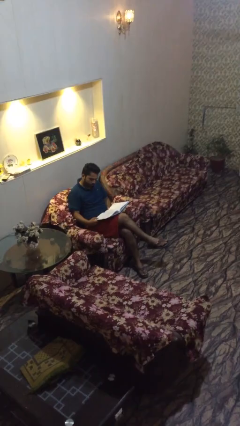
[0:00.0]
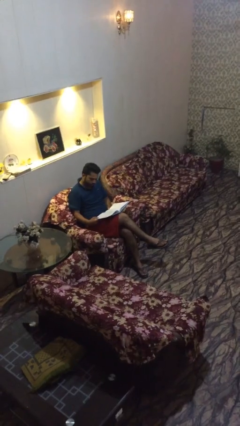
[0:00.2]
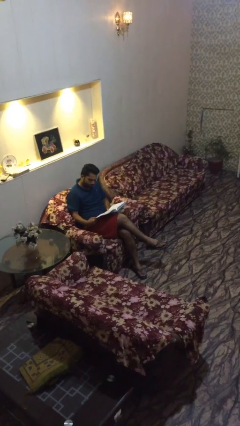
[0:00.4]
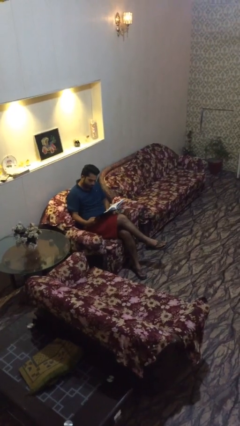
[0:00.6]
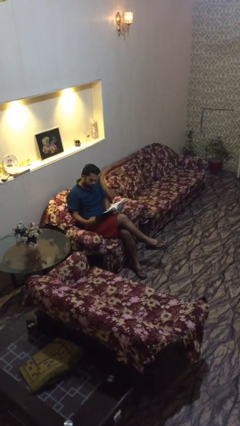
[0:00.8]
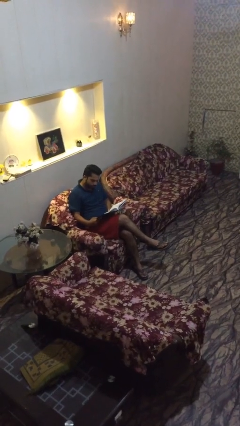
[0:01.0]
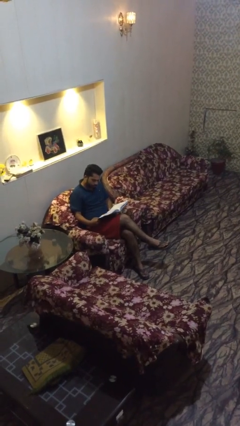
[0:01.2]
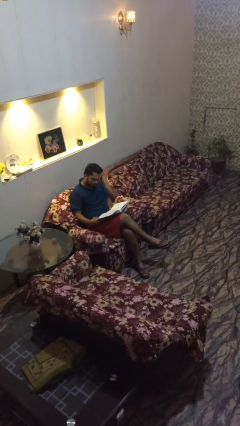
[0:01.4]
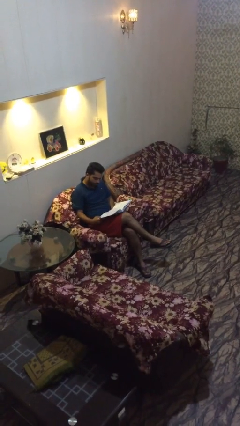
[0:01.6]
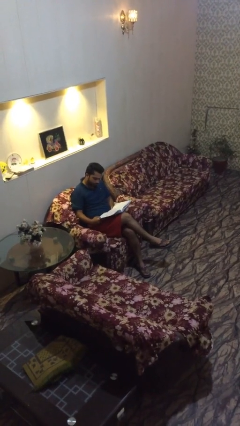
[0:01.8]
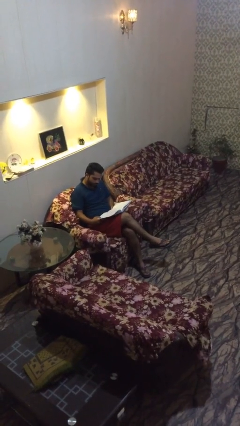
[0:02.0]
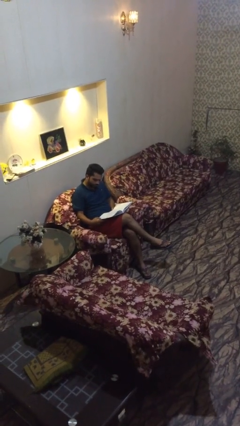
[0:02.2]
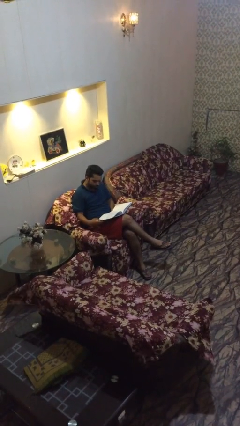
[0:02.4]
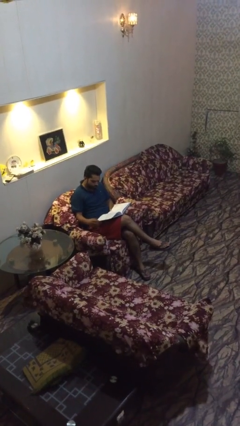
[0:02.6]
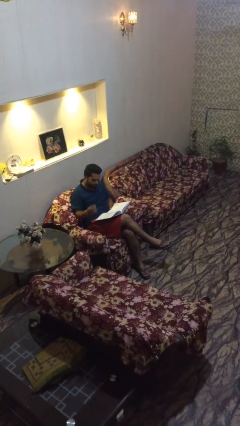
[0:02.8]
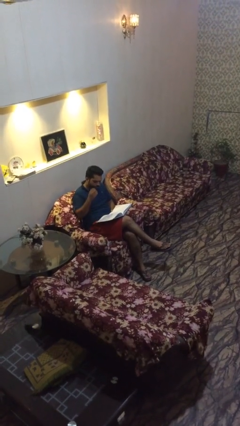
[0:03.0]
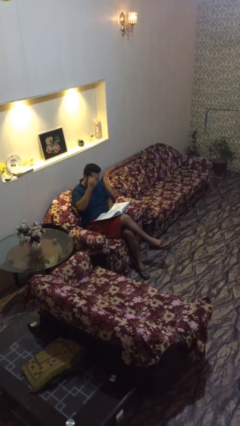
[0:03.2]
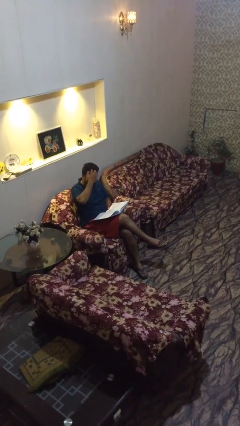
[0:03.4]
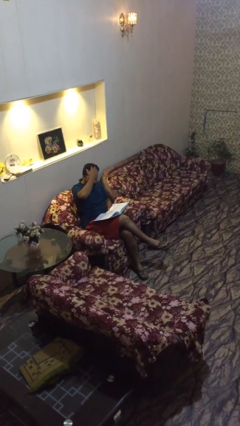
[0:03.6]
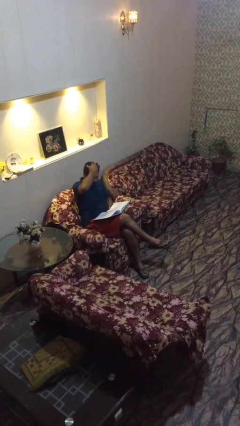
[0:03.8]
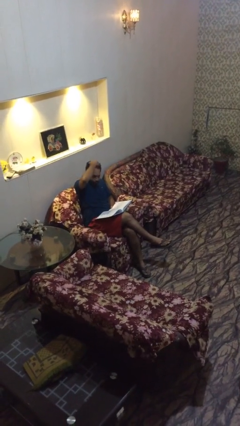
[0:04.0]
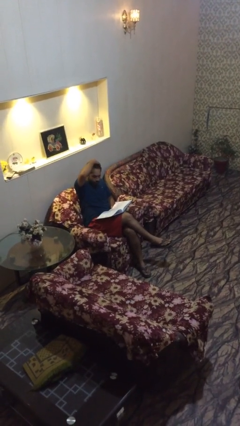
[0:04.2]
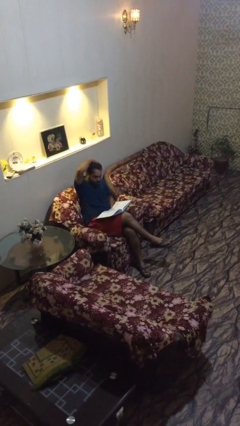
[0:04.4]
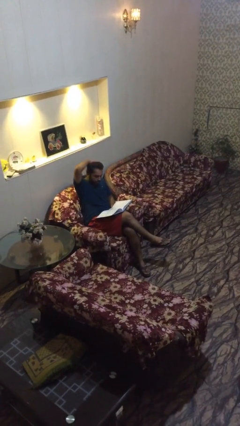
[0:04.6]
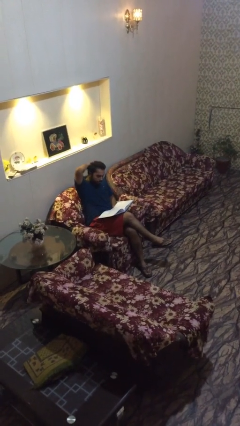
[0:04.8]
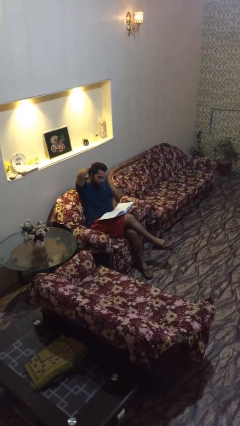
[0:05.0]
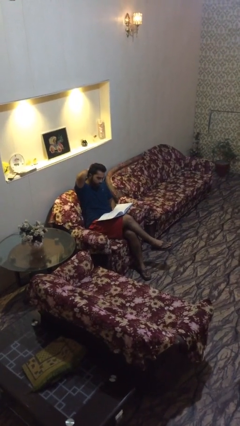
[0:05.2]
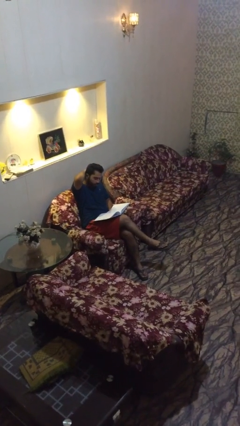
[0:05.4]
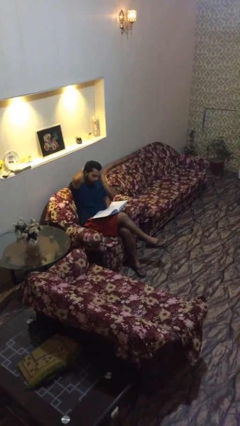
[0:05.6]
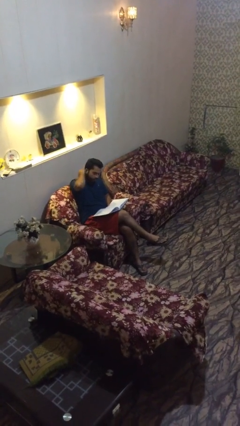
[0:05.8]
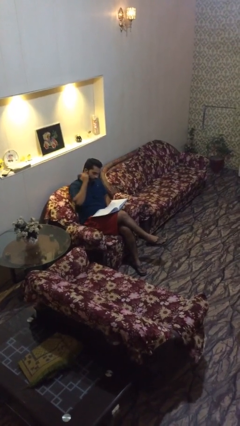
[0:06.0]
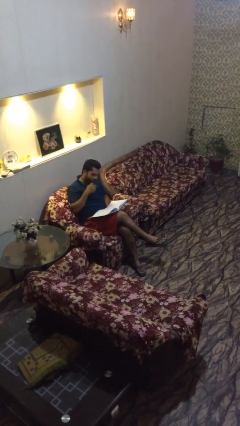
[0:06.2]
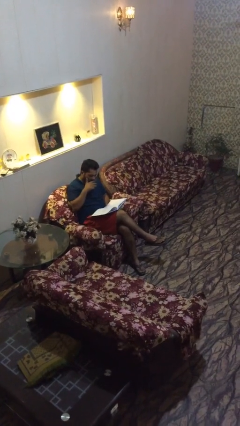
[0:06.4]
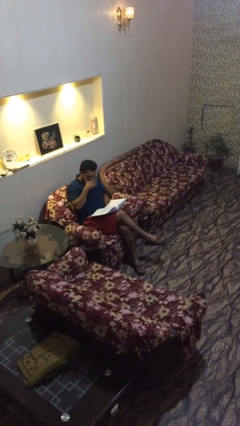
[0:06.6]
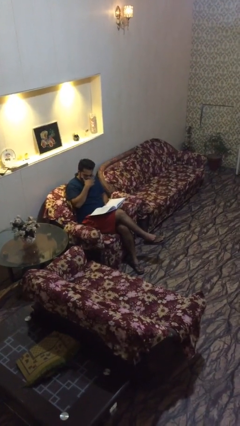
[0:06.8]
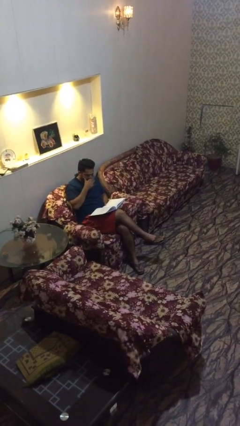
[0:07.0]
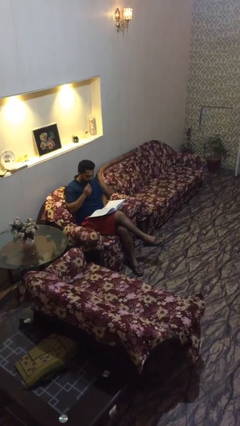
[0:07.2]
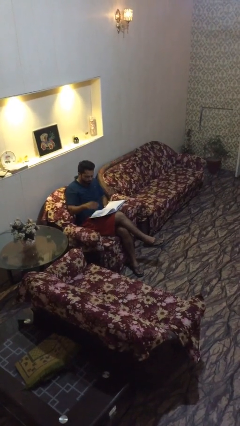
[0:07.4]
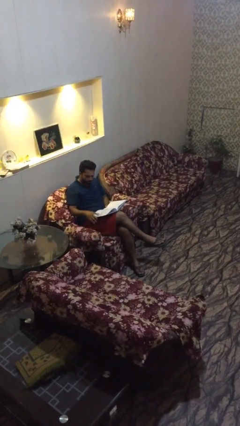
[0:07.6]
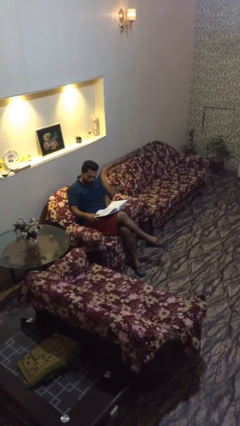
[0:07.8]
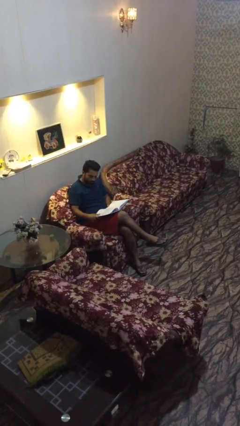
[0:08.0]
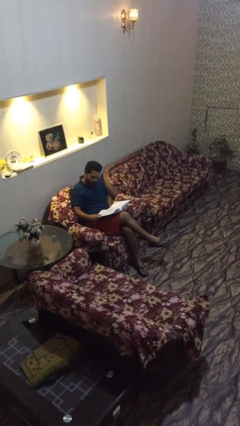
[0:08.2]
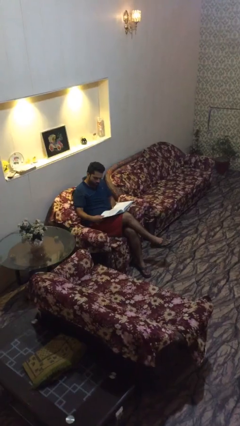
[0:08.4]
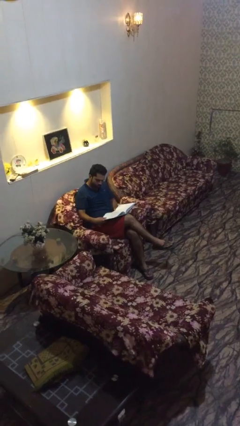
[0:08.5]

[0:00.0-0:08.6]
person reads document

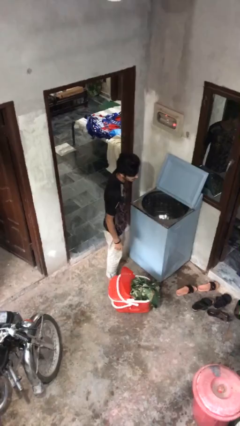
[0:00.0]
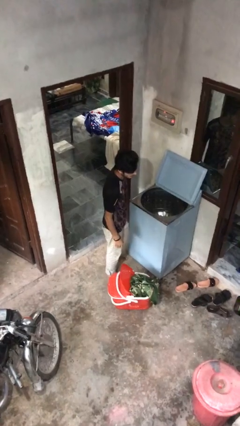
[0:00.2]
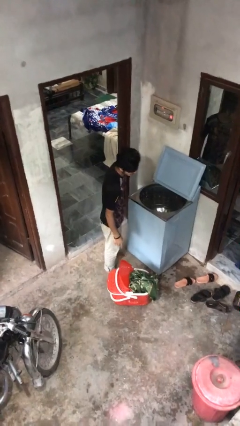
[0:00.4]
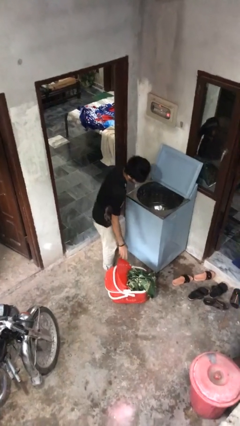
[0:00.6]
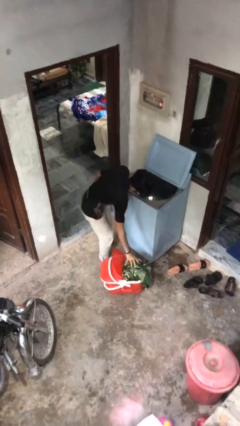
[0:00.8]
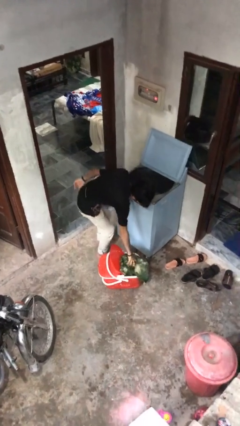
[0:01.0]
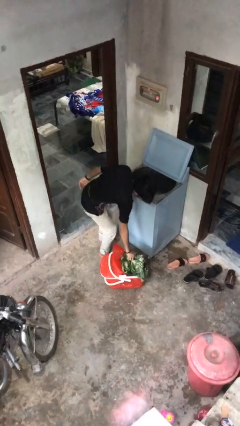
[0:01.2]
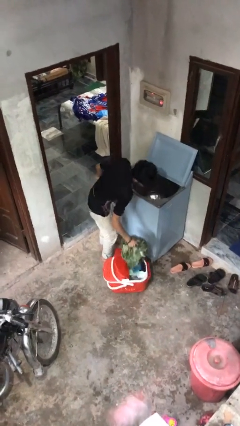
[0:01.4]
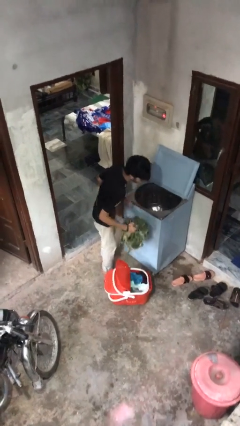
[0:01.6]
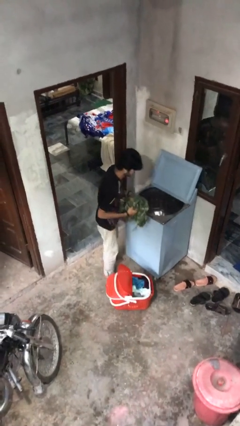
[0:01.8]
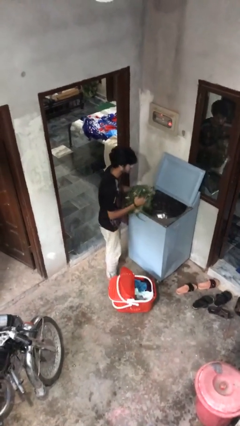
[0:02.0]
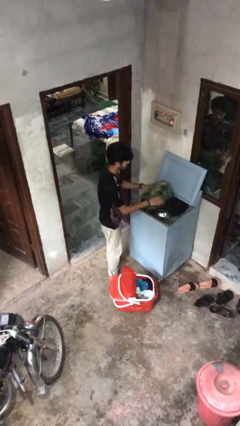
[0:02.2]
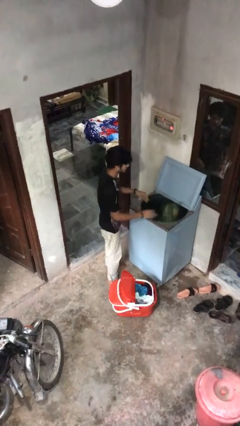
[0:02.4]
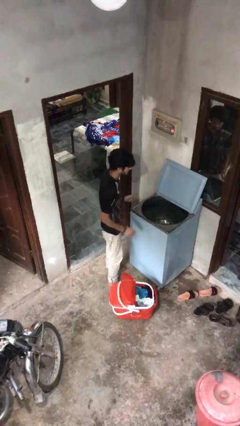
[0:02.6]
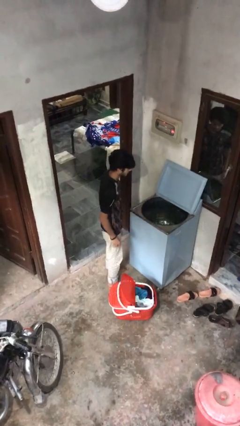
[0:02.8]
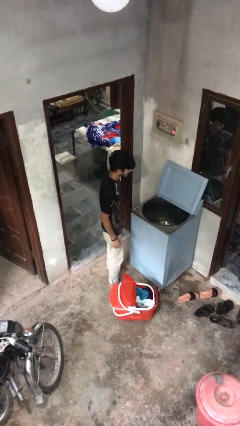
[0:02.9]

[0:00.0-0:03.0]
person loads clotheswasher

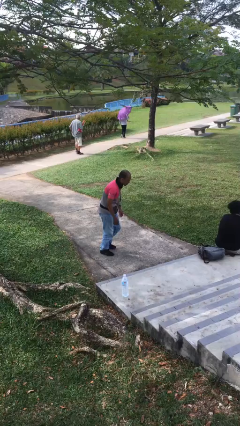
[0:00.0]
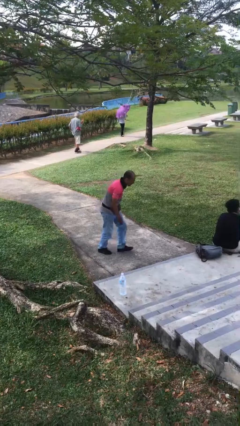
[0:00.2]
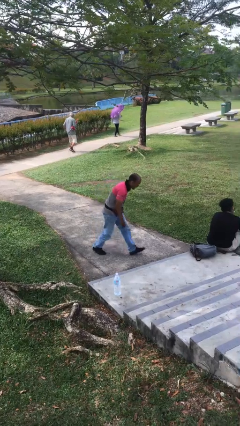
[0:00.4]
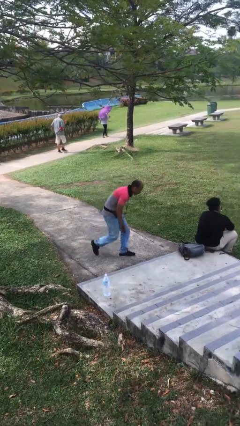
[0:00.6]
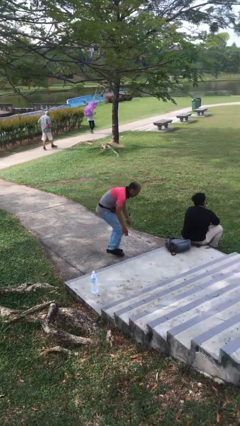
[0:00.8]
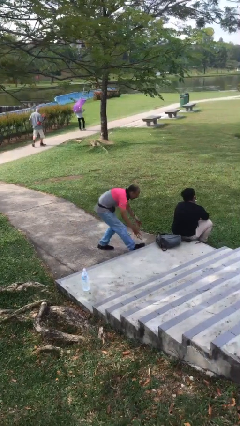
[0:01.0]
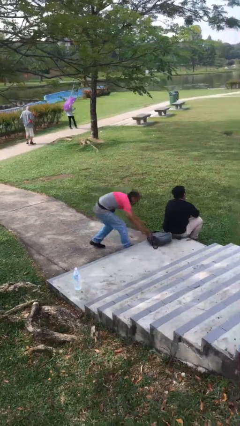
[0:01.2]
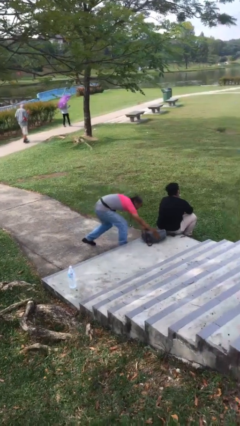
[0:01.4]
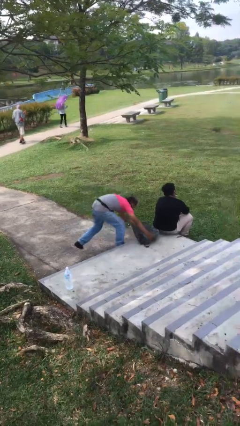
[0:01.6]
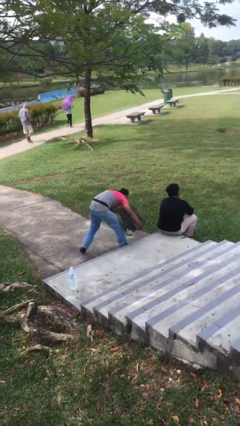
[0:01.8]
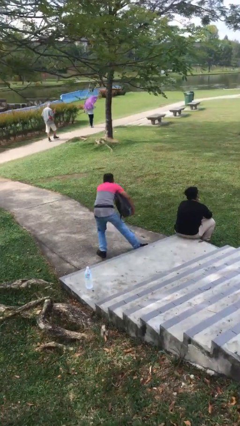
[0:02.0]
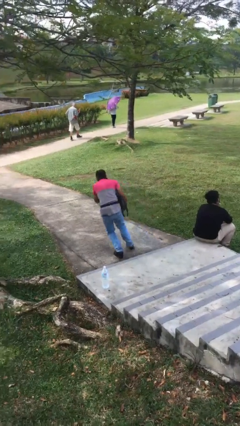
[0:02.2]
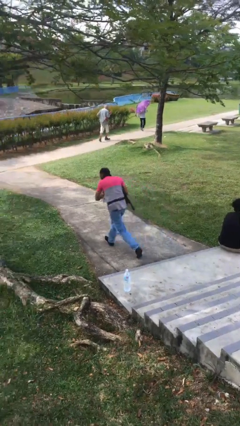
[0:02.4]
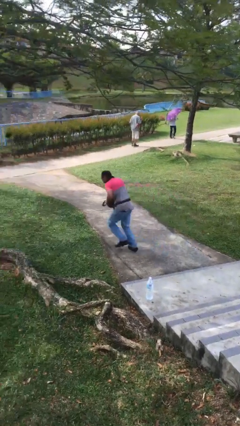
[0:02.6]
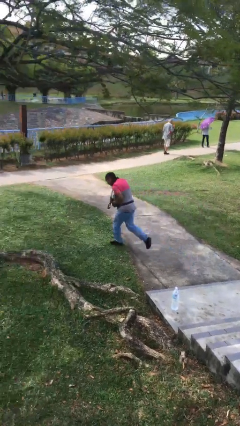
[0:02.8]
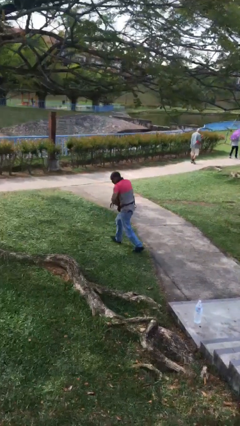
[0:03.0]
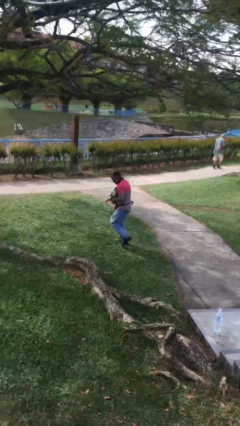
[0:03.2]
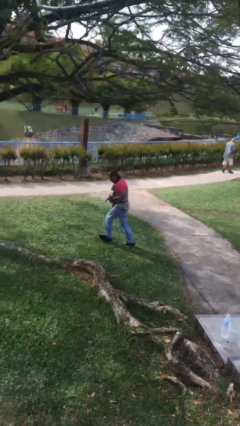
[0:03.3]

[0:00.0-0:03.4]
person steals object from person

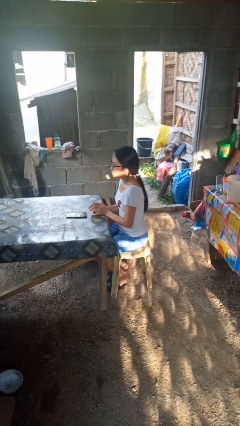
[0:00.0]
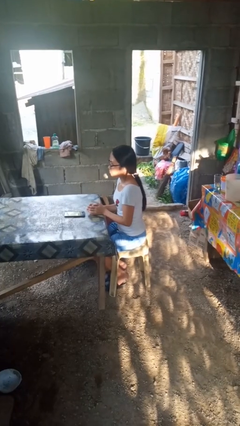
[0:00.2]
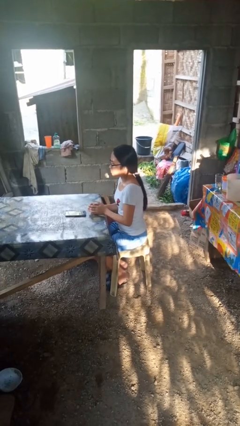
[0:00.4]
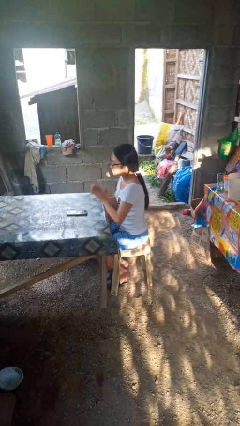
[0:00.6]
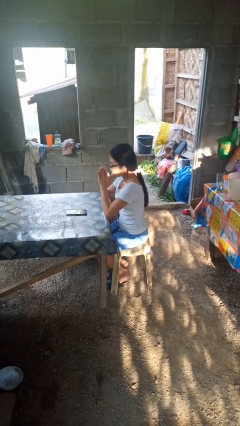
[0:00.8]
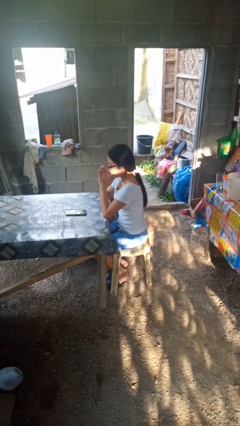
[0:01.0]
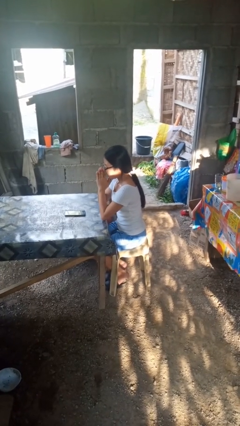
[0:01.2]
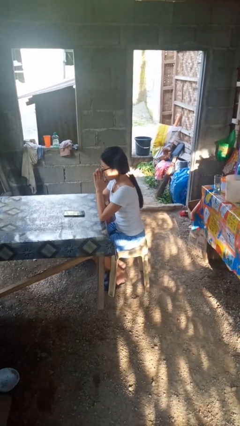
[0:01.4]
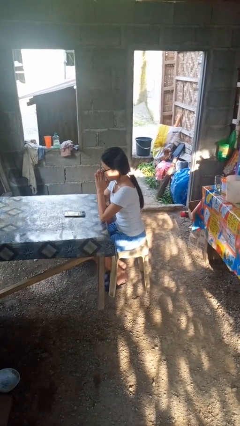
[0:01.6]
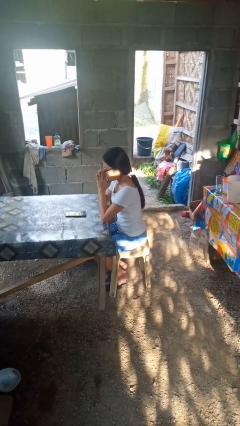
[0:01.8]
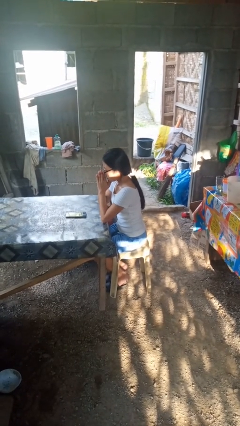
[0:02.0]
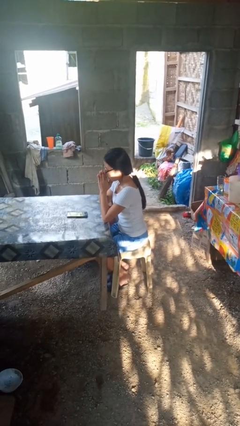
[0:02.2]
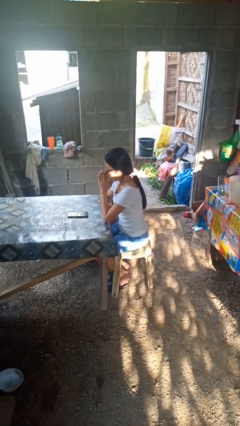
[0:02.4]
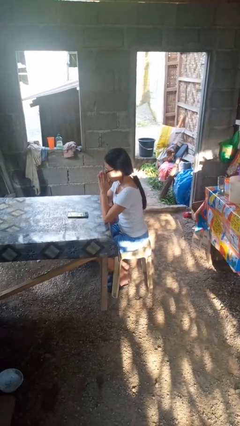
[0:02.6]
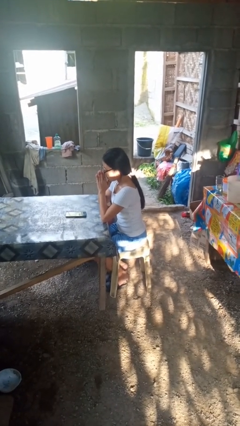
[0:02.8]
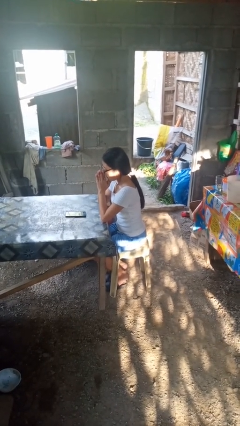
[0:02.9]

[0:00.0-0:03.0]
person prays
